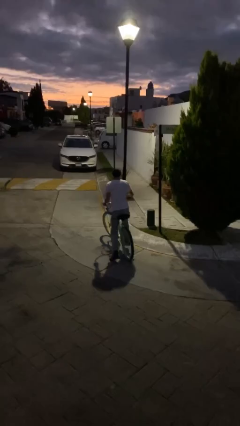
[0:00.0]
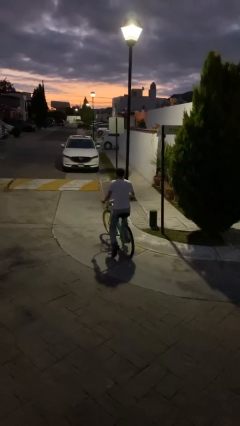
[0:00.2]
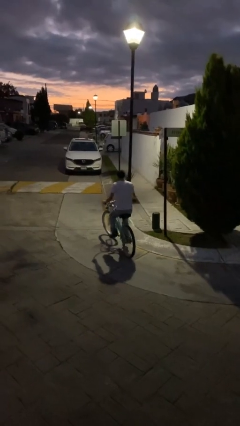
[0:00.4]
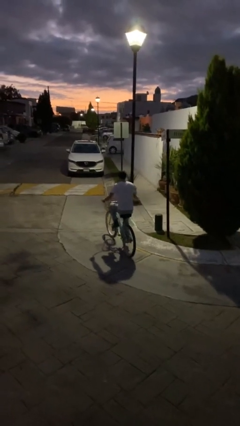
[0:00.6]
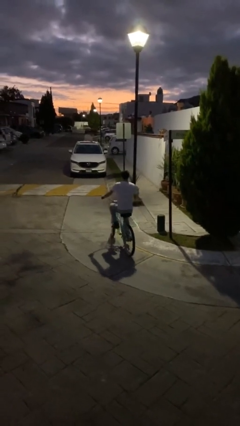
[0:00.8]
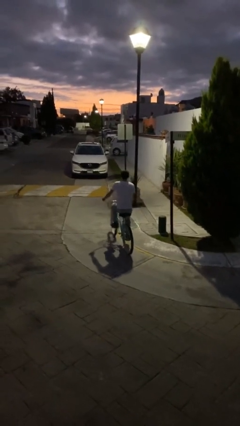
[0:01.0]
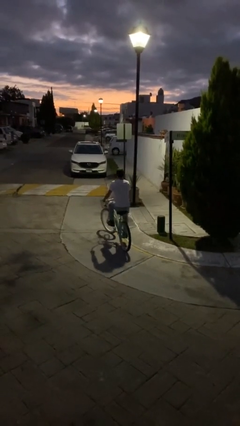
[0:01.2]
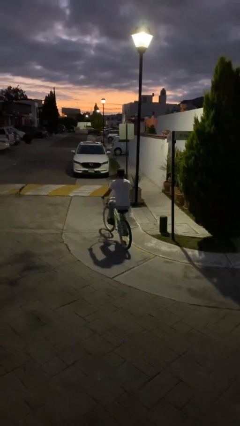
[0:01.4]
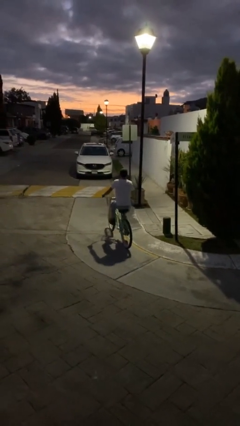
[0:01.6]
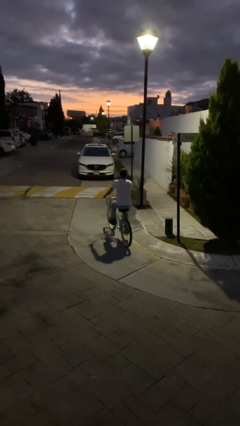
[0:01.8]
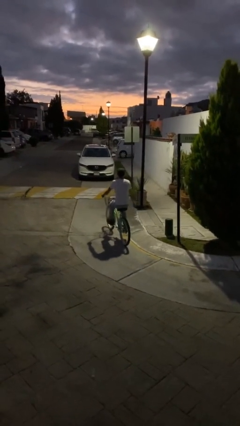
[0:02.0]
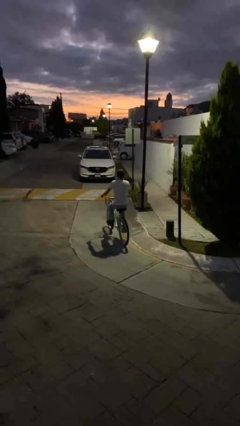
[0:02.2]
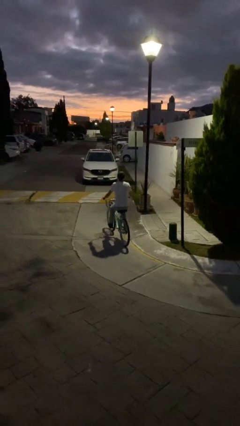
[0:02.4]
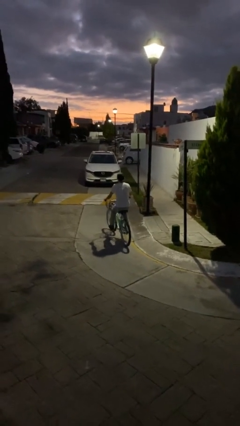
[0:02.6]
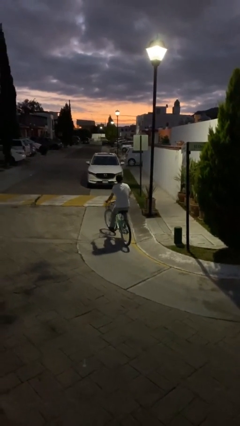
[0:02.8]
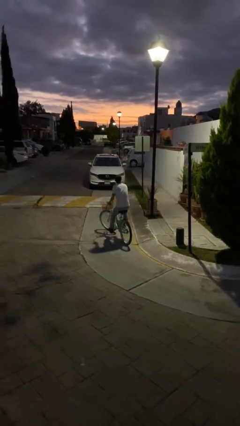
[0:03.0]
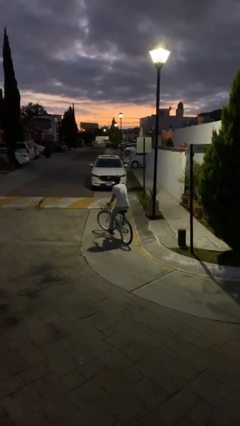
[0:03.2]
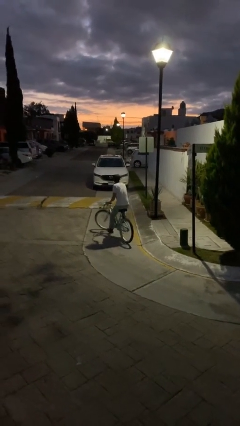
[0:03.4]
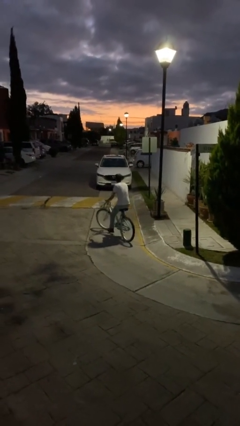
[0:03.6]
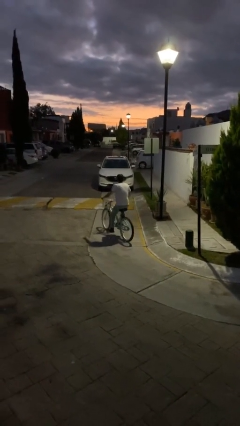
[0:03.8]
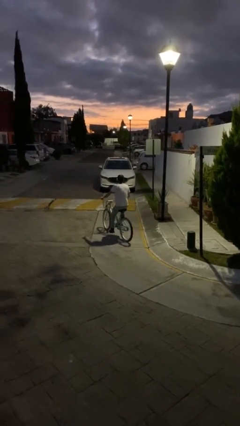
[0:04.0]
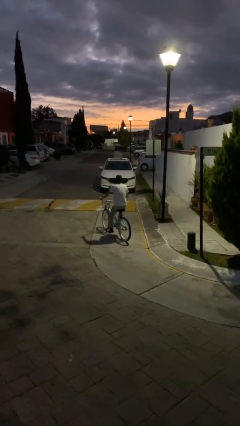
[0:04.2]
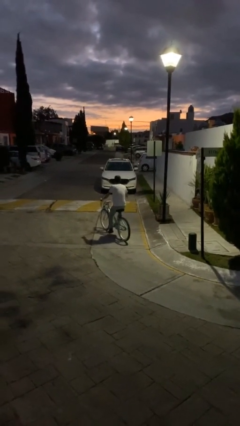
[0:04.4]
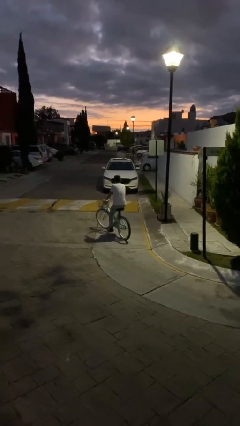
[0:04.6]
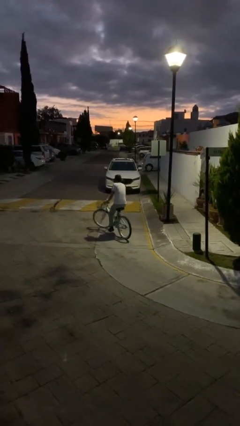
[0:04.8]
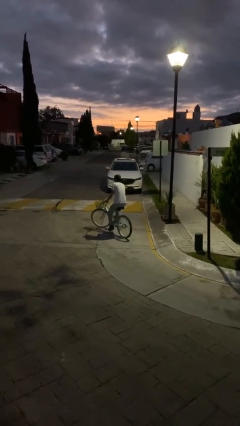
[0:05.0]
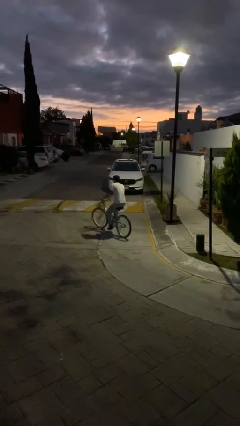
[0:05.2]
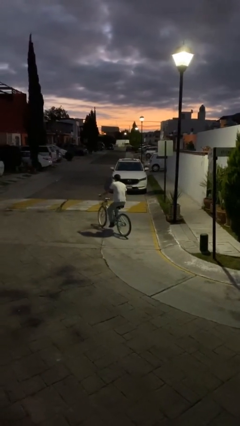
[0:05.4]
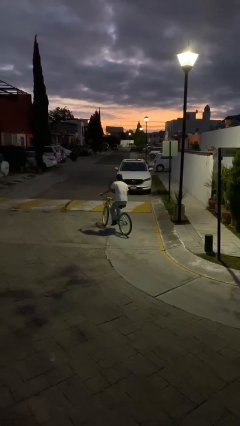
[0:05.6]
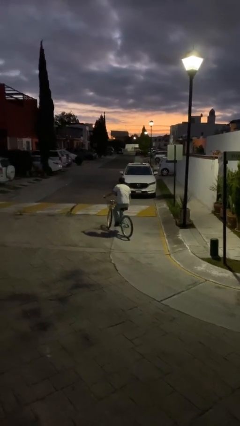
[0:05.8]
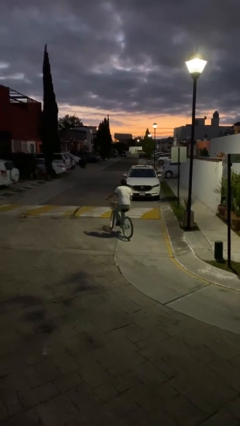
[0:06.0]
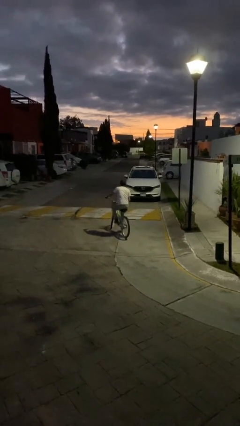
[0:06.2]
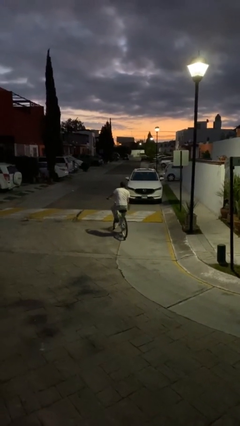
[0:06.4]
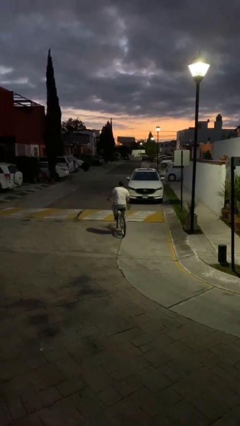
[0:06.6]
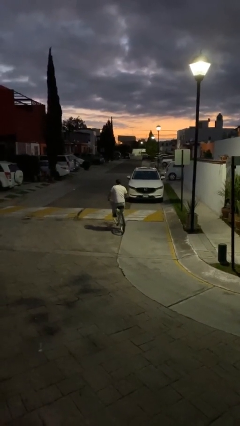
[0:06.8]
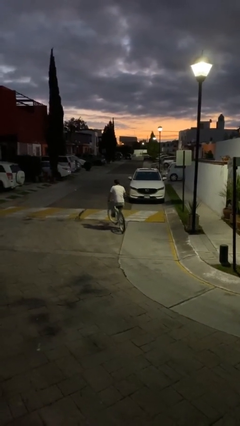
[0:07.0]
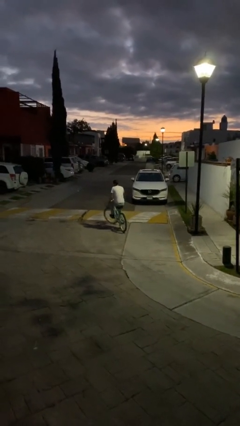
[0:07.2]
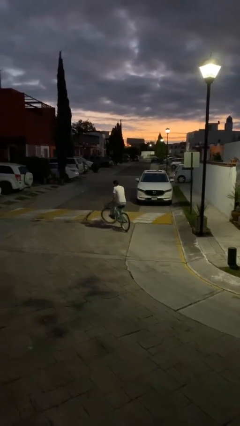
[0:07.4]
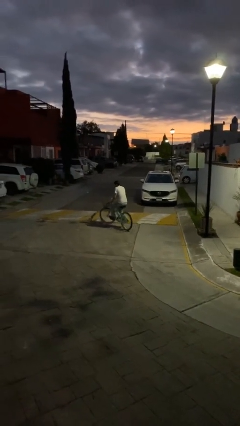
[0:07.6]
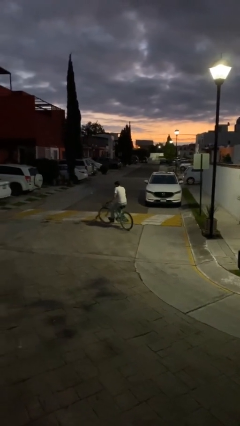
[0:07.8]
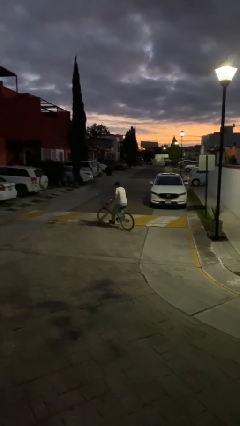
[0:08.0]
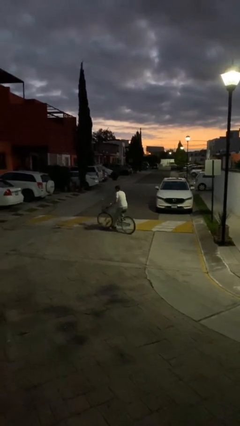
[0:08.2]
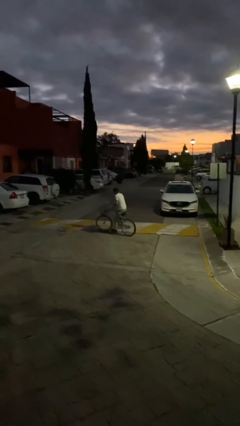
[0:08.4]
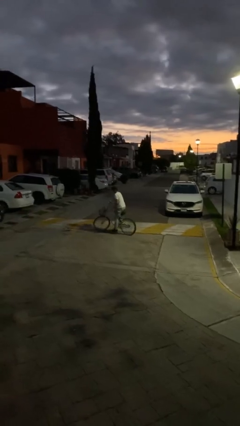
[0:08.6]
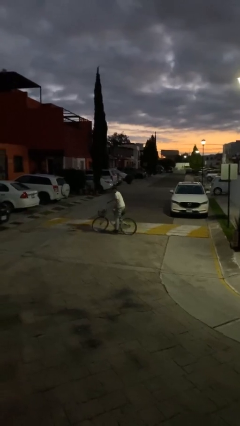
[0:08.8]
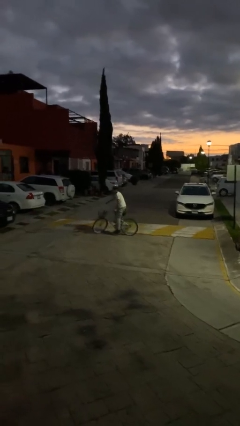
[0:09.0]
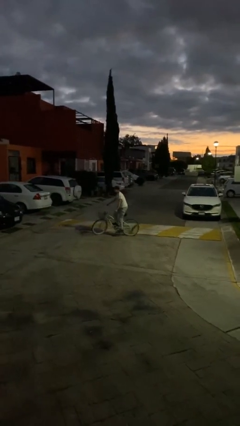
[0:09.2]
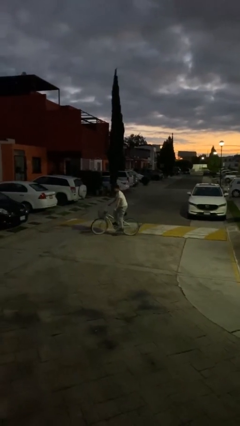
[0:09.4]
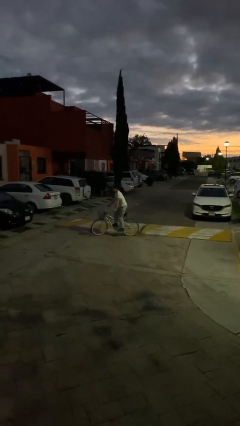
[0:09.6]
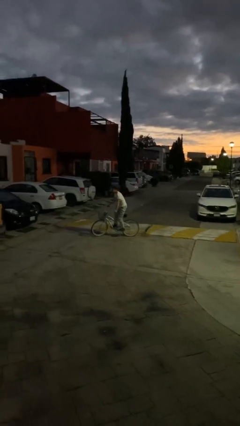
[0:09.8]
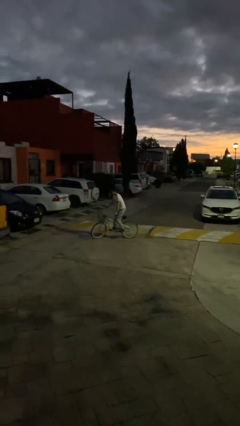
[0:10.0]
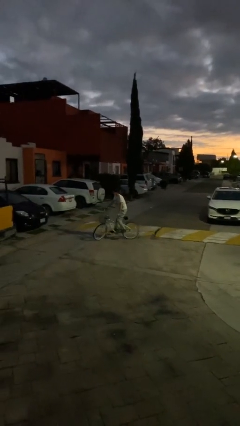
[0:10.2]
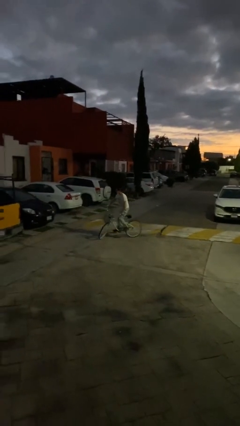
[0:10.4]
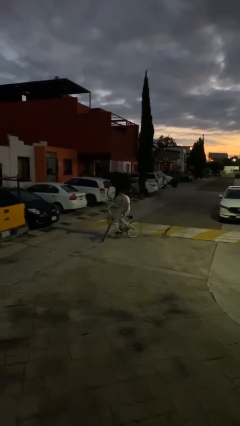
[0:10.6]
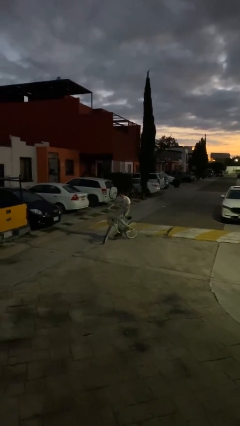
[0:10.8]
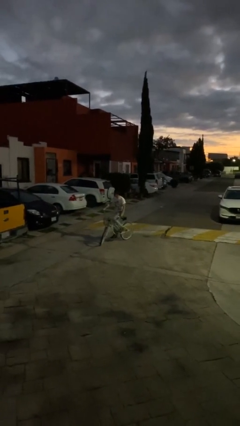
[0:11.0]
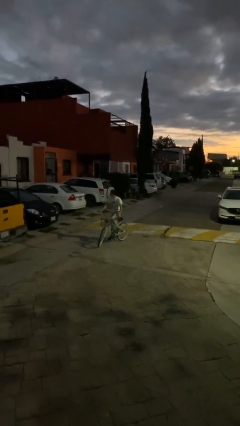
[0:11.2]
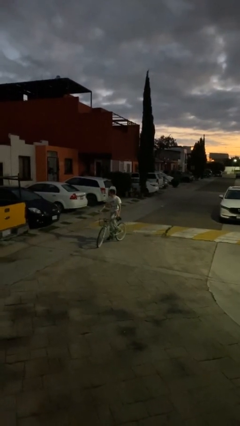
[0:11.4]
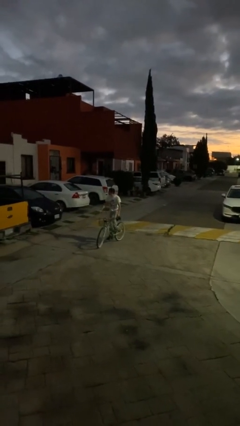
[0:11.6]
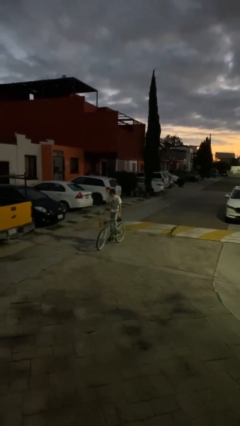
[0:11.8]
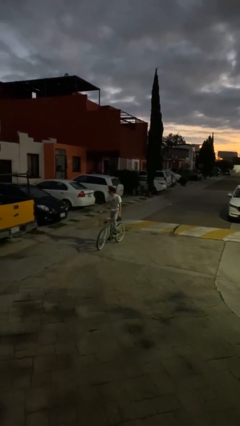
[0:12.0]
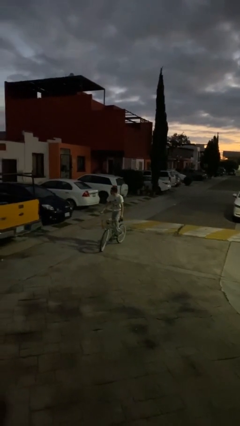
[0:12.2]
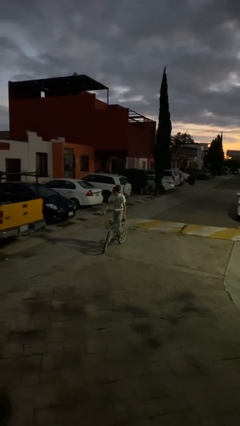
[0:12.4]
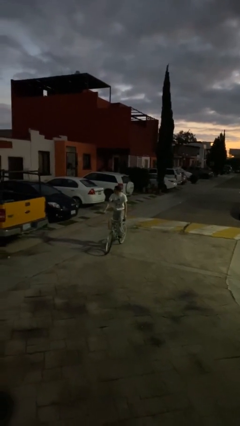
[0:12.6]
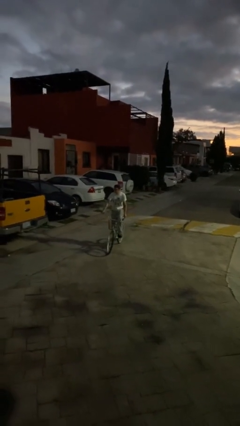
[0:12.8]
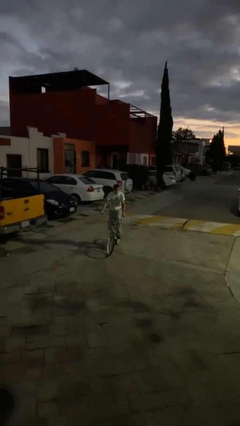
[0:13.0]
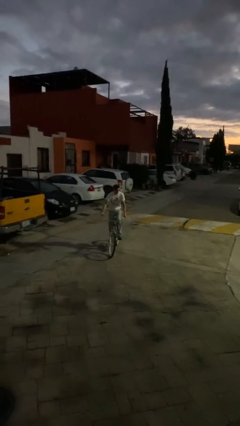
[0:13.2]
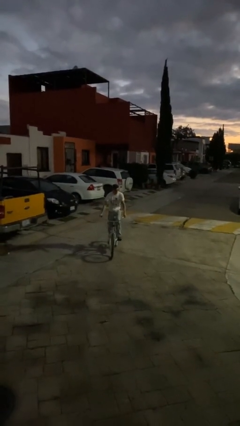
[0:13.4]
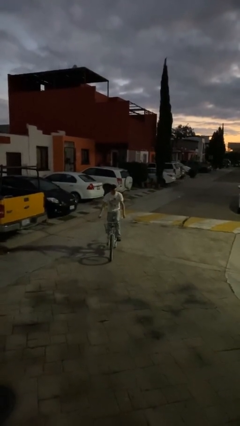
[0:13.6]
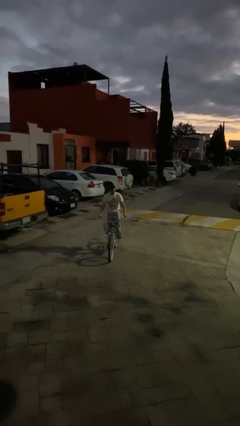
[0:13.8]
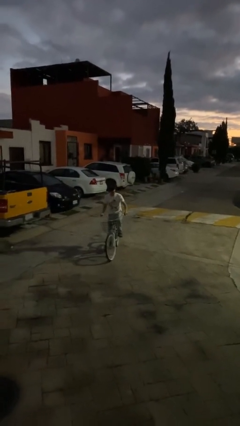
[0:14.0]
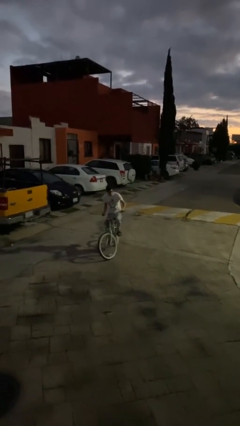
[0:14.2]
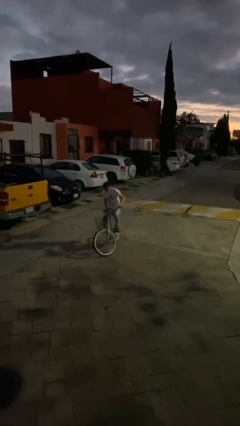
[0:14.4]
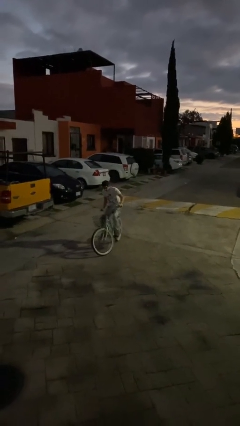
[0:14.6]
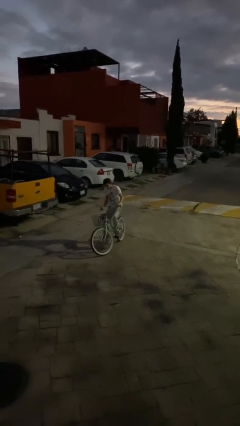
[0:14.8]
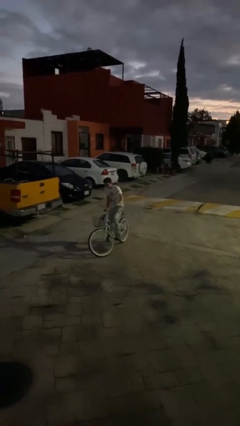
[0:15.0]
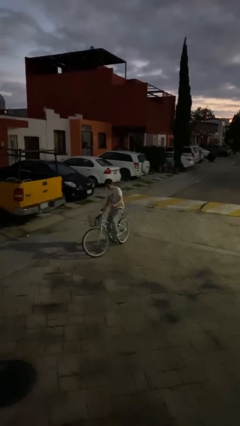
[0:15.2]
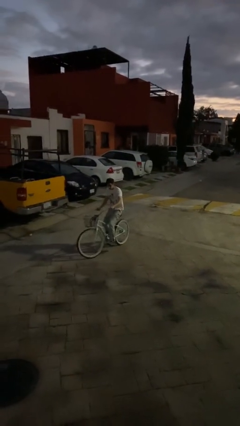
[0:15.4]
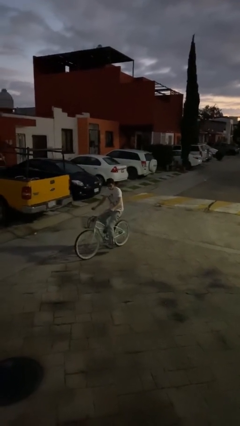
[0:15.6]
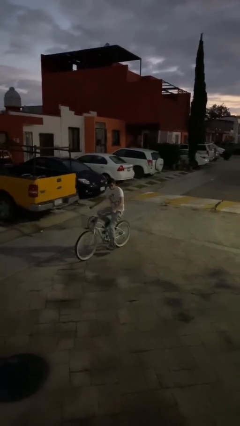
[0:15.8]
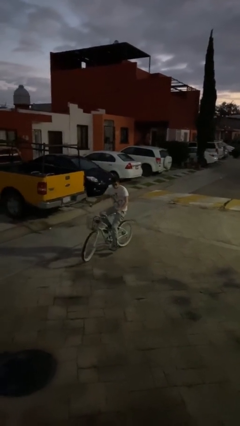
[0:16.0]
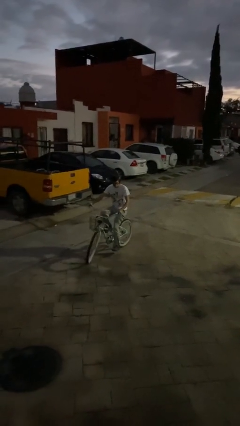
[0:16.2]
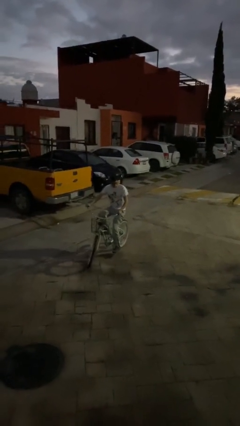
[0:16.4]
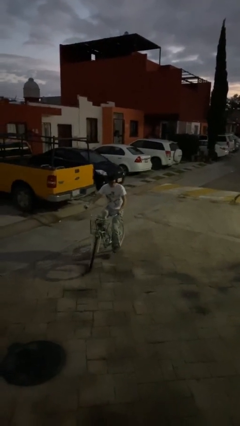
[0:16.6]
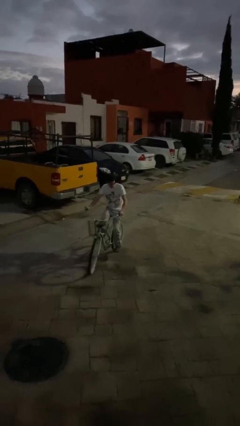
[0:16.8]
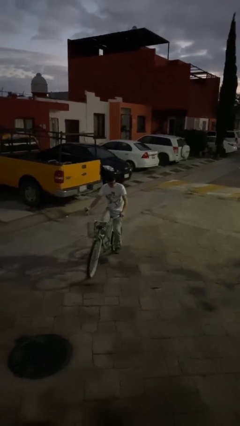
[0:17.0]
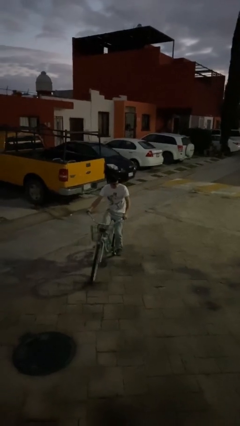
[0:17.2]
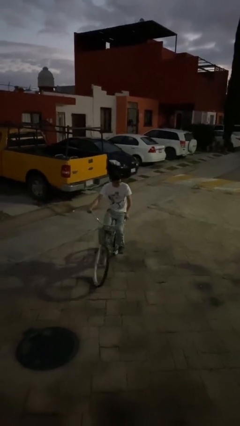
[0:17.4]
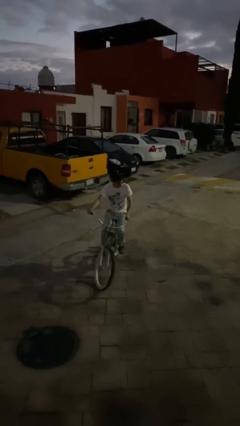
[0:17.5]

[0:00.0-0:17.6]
person rides bicycle

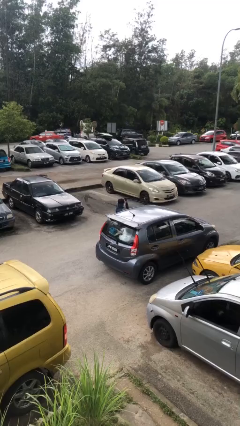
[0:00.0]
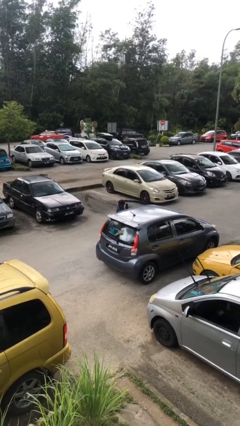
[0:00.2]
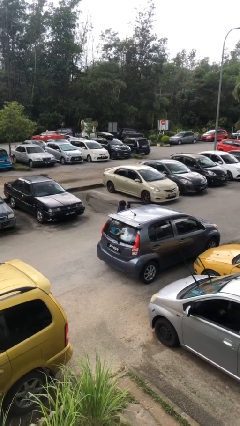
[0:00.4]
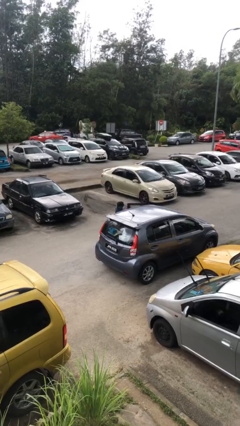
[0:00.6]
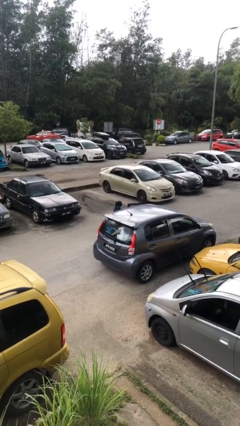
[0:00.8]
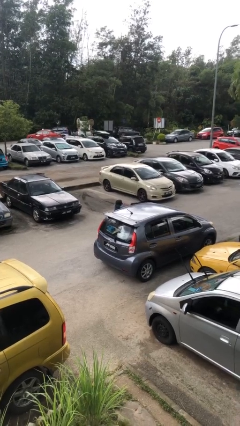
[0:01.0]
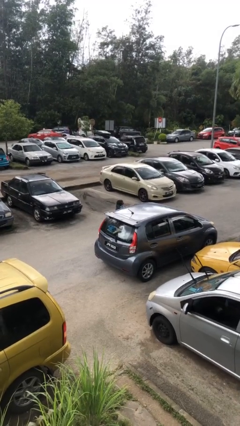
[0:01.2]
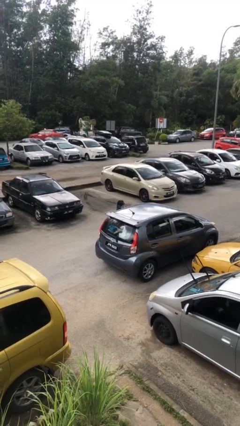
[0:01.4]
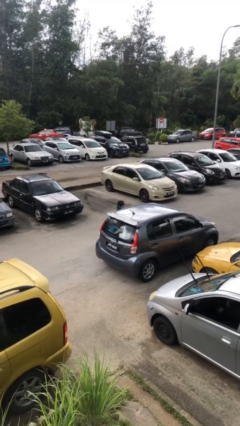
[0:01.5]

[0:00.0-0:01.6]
person closes car door
